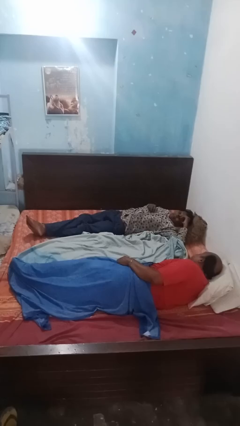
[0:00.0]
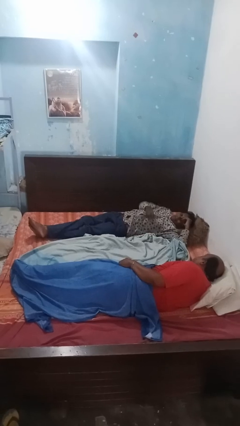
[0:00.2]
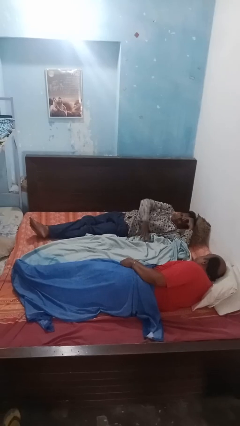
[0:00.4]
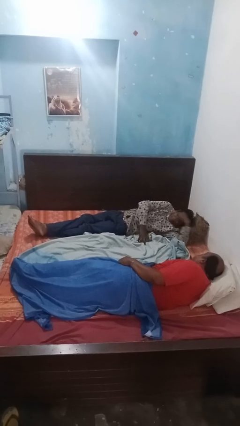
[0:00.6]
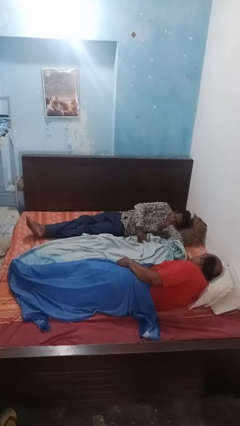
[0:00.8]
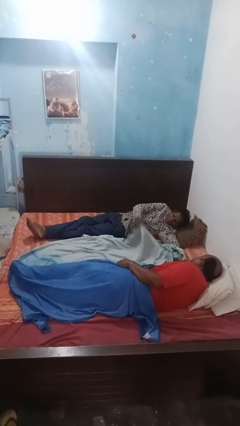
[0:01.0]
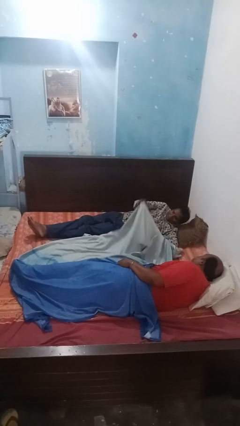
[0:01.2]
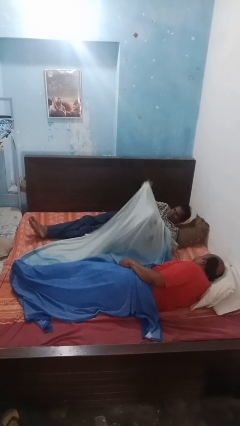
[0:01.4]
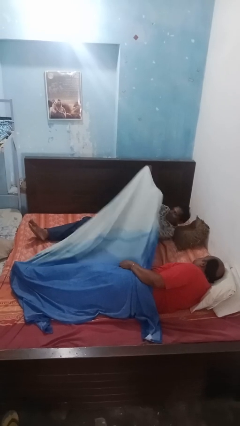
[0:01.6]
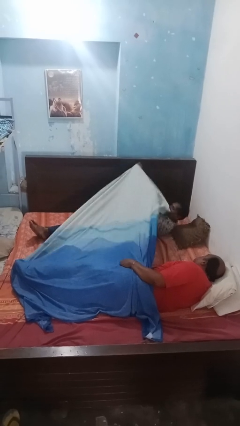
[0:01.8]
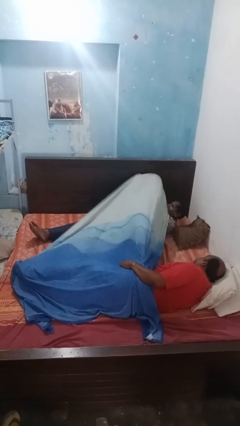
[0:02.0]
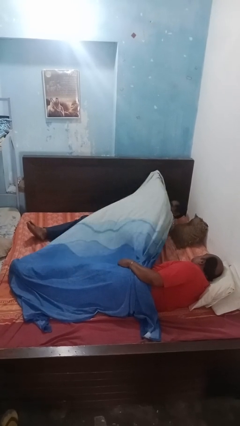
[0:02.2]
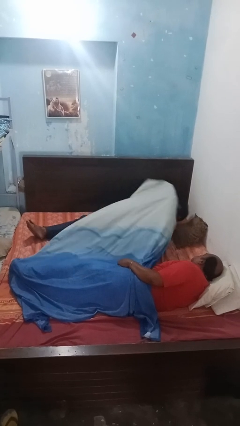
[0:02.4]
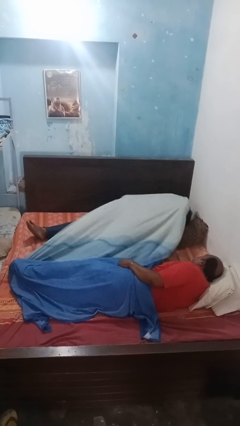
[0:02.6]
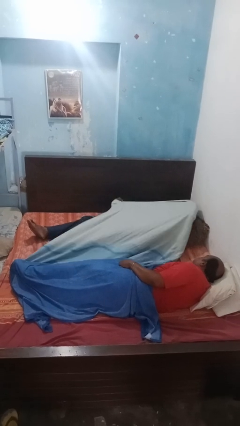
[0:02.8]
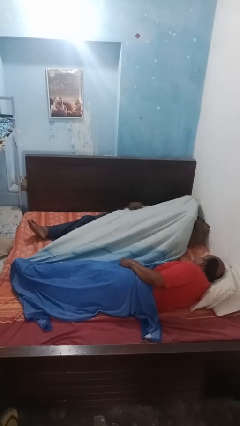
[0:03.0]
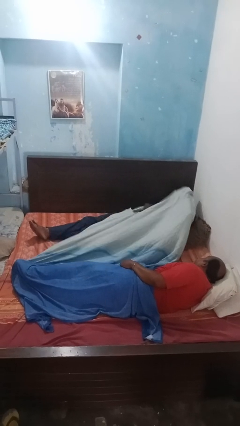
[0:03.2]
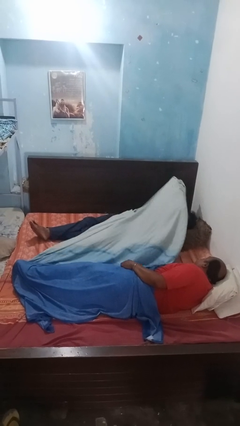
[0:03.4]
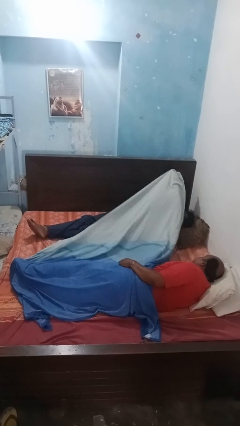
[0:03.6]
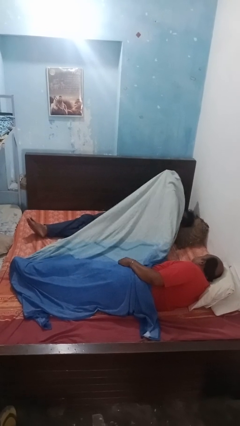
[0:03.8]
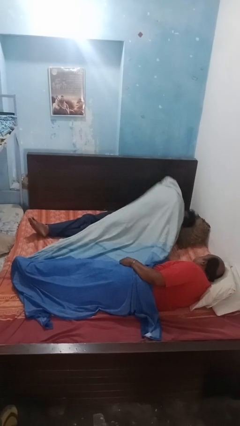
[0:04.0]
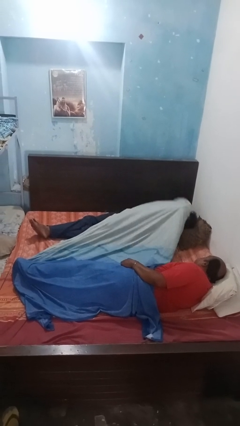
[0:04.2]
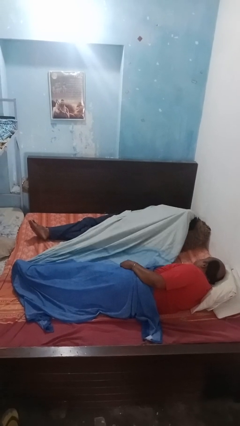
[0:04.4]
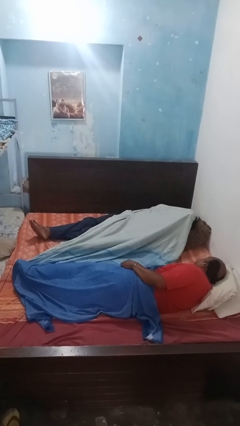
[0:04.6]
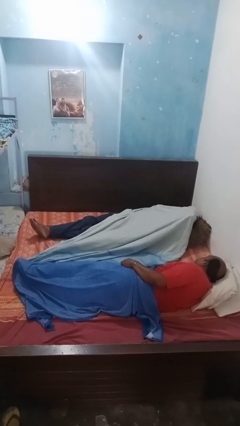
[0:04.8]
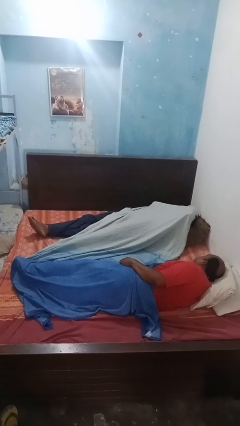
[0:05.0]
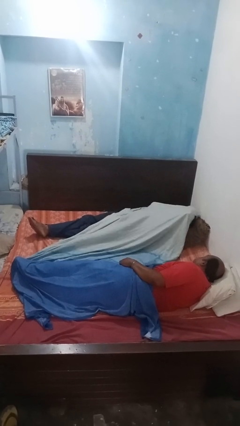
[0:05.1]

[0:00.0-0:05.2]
person covers friend with blanket

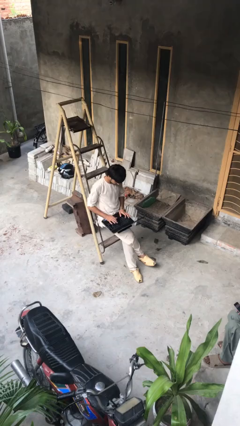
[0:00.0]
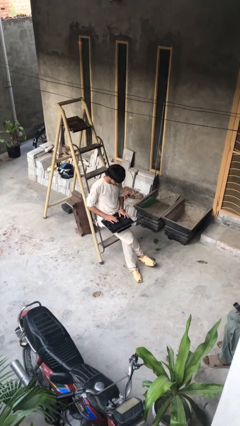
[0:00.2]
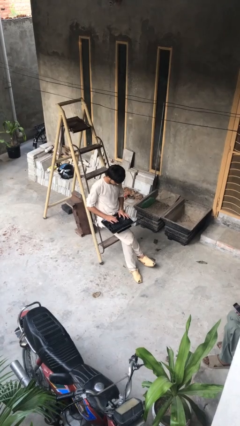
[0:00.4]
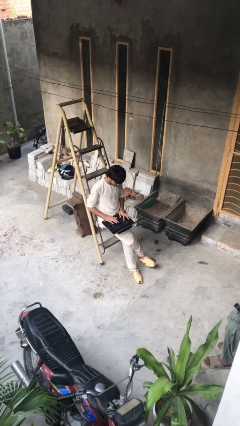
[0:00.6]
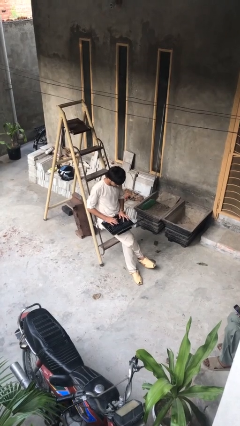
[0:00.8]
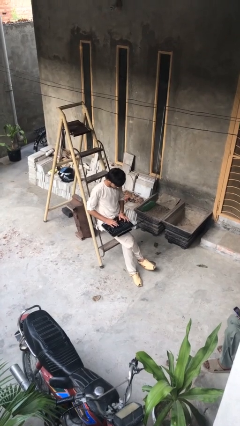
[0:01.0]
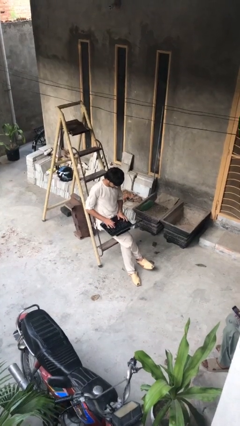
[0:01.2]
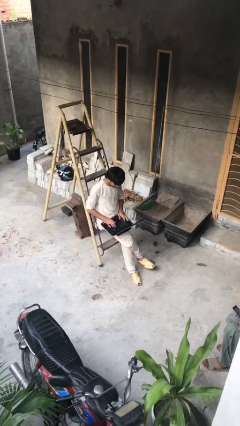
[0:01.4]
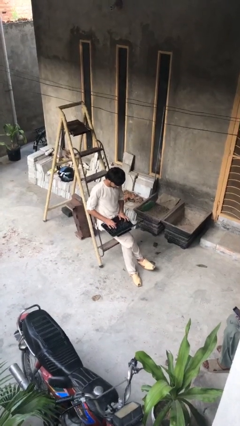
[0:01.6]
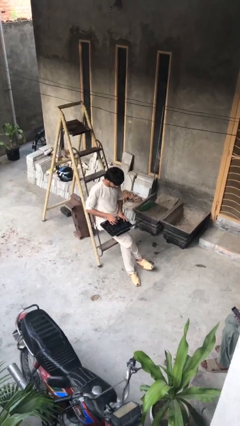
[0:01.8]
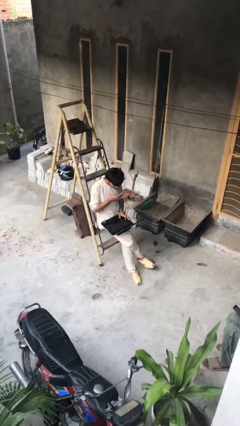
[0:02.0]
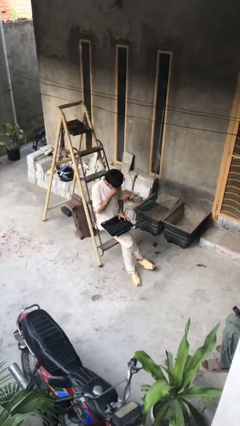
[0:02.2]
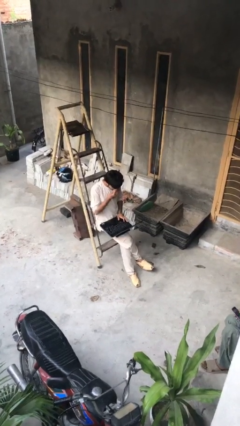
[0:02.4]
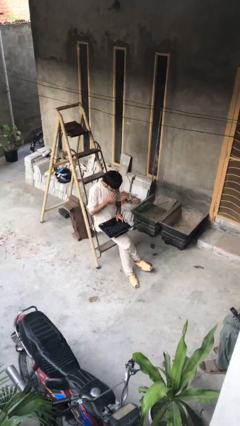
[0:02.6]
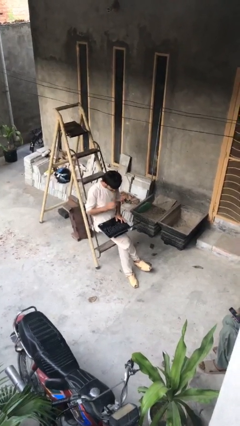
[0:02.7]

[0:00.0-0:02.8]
person interacts with laptop

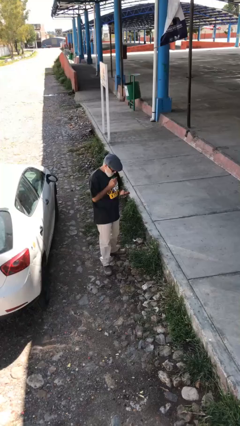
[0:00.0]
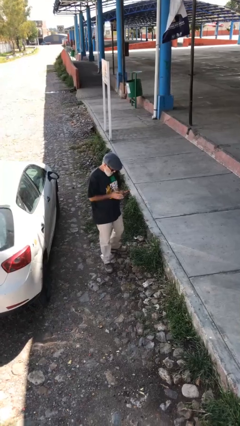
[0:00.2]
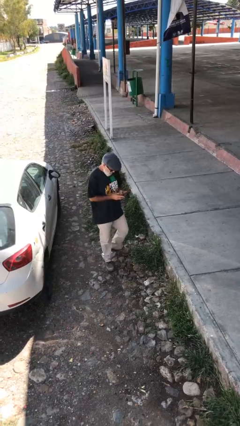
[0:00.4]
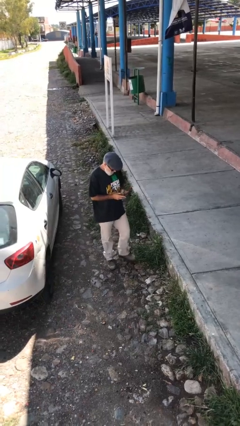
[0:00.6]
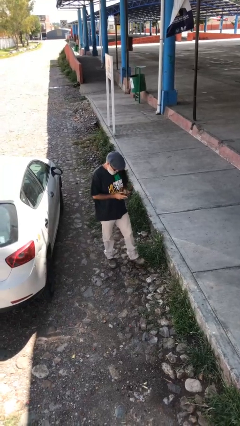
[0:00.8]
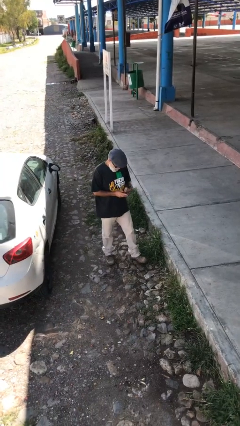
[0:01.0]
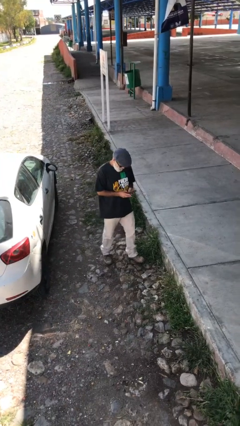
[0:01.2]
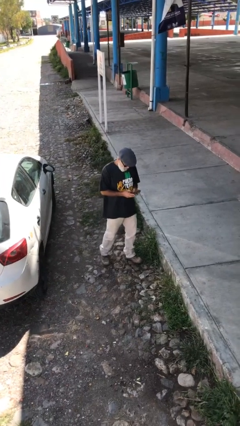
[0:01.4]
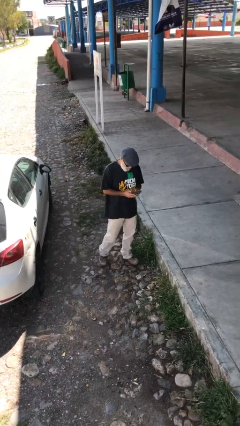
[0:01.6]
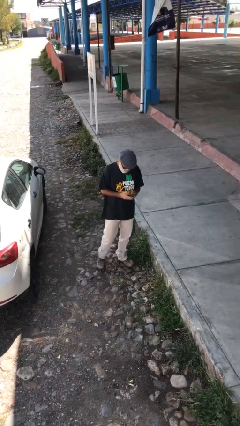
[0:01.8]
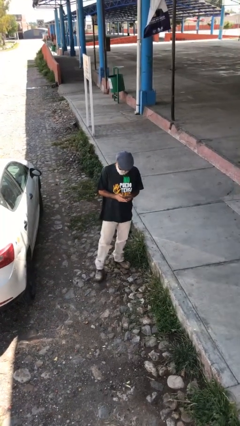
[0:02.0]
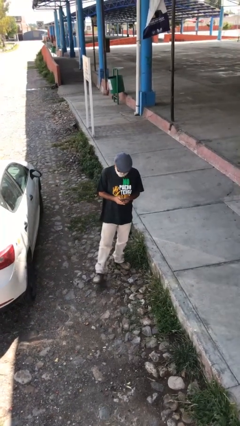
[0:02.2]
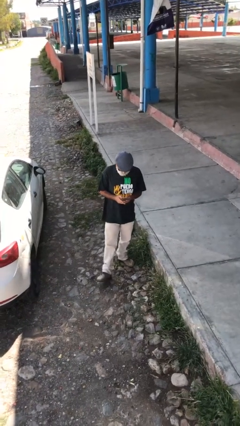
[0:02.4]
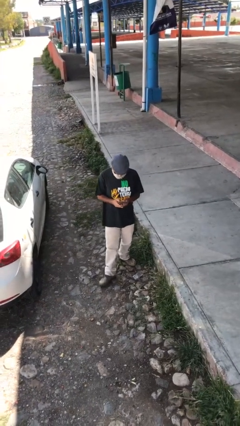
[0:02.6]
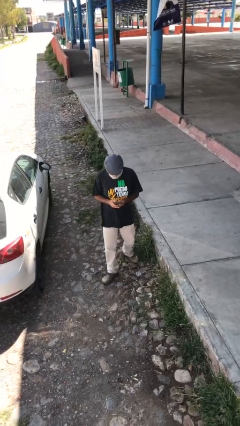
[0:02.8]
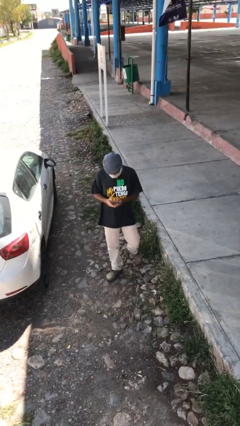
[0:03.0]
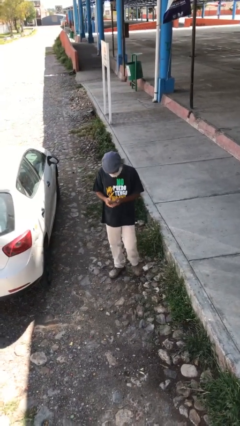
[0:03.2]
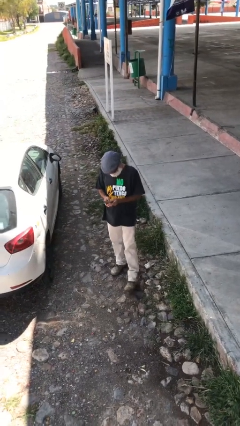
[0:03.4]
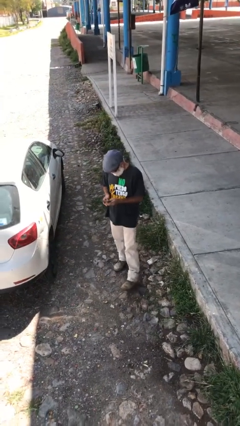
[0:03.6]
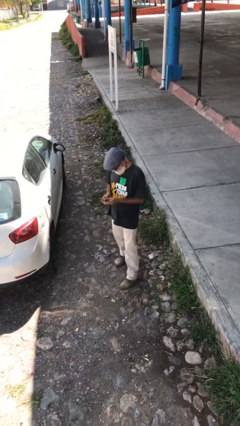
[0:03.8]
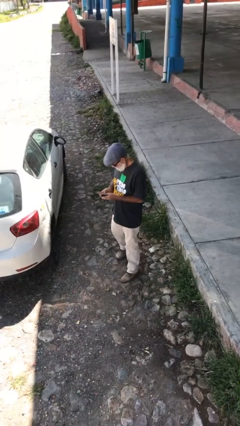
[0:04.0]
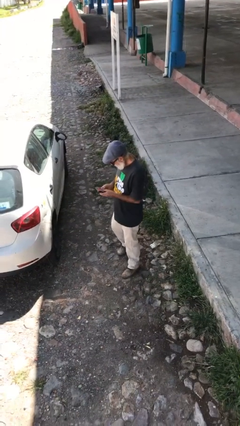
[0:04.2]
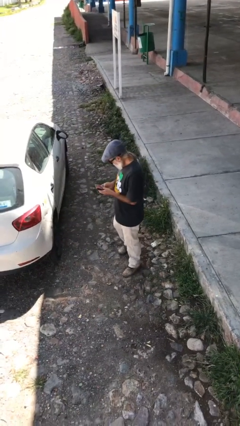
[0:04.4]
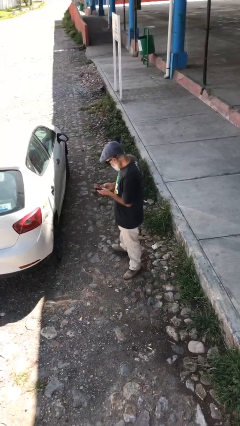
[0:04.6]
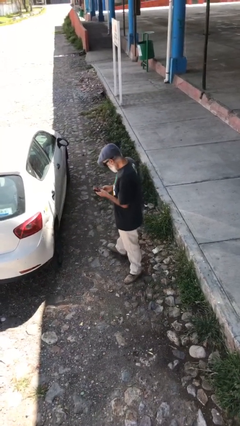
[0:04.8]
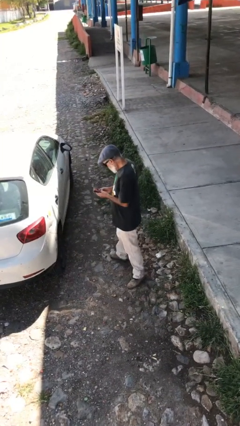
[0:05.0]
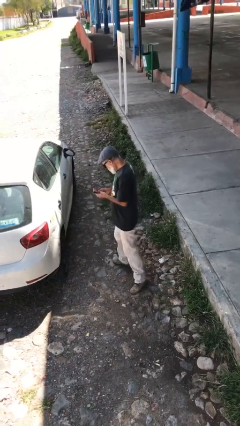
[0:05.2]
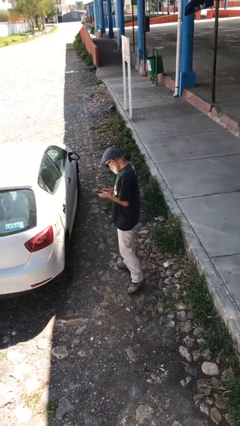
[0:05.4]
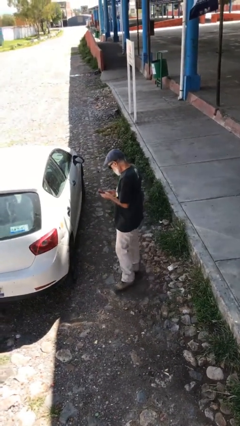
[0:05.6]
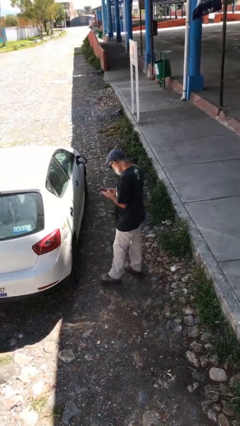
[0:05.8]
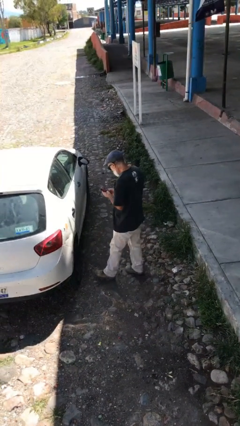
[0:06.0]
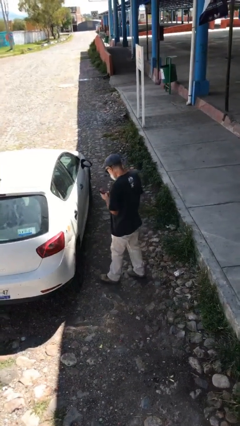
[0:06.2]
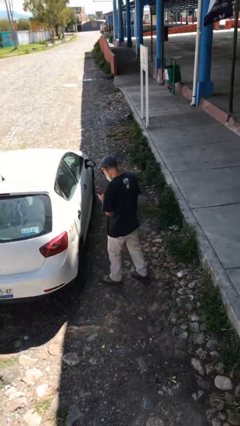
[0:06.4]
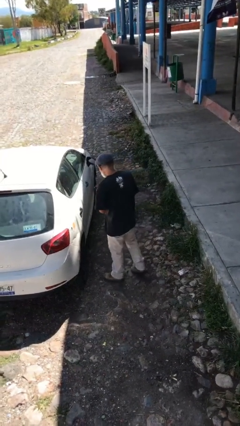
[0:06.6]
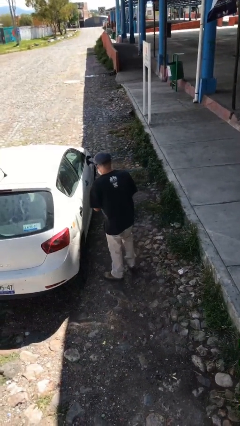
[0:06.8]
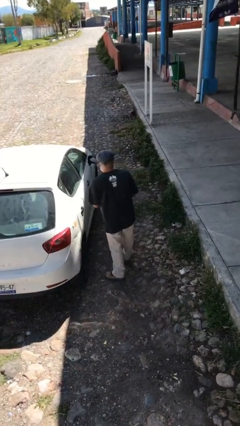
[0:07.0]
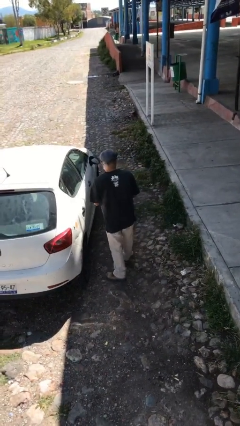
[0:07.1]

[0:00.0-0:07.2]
person texts on phone

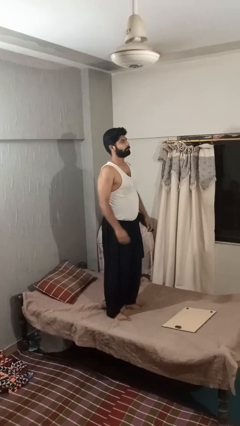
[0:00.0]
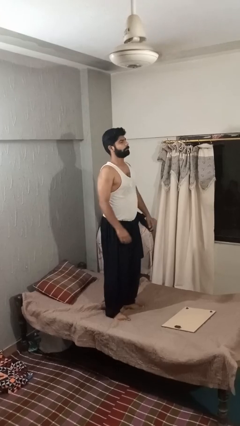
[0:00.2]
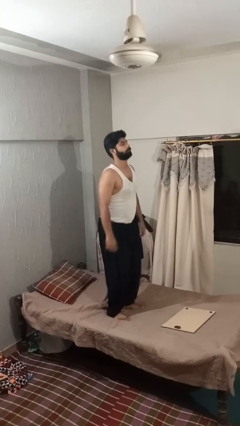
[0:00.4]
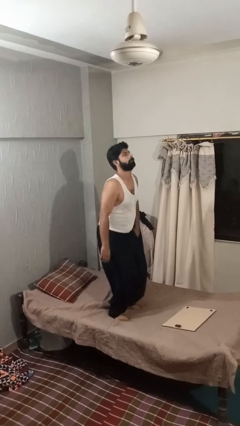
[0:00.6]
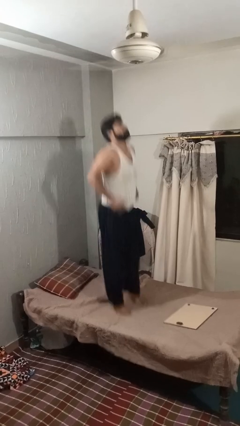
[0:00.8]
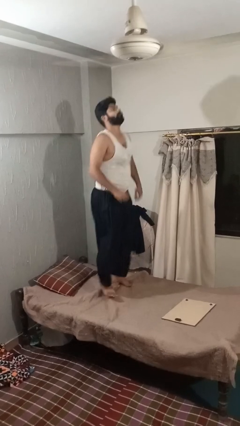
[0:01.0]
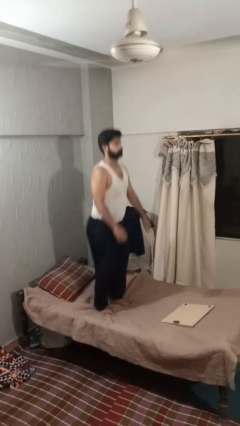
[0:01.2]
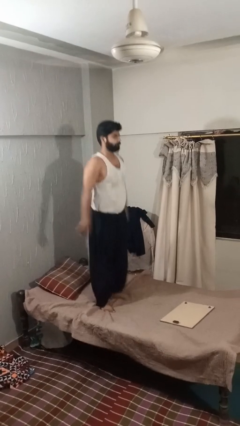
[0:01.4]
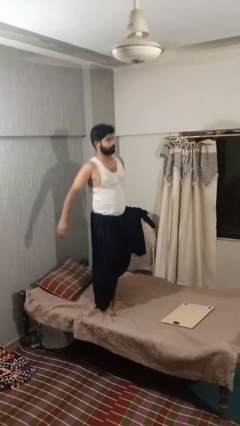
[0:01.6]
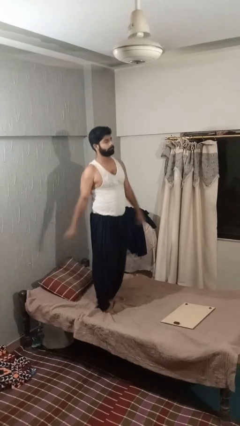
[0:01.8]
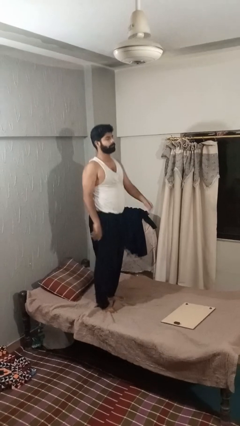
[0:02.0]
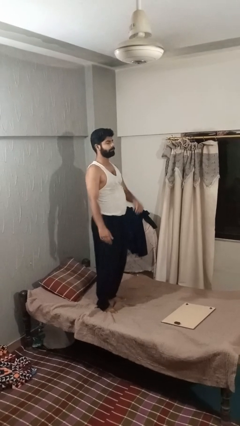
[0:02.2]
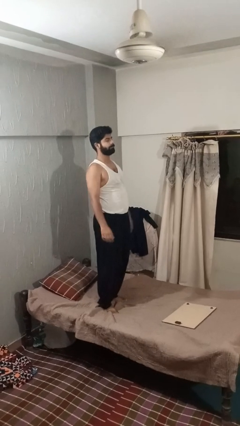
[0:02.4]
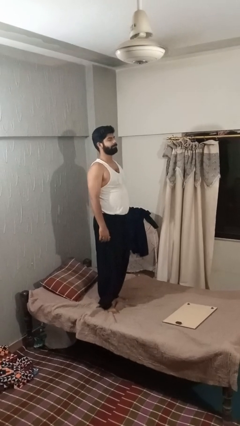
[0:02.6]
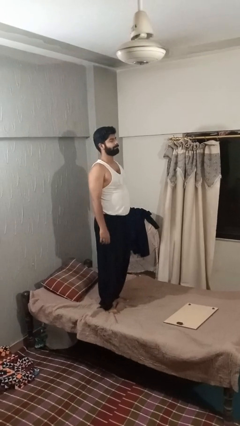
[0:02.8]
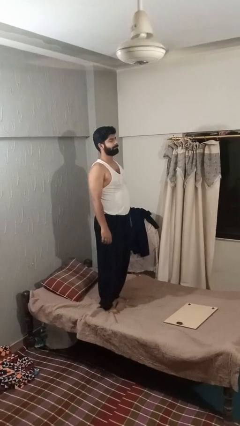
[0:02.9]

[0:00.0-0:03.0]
person jumps on bed
